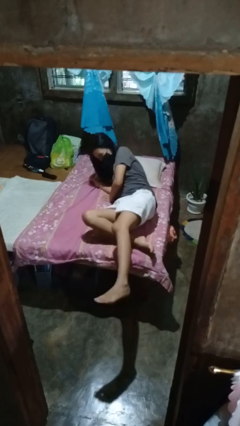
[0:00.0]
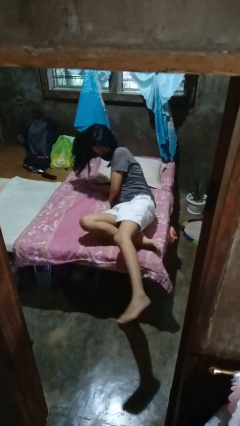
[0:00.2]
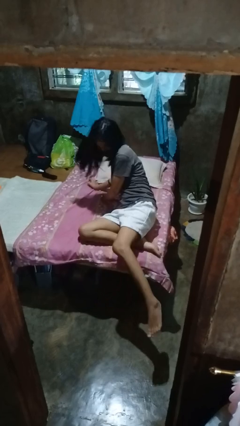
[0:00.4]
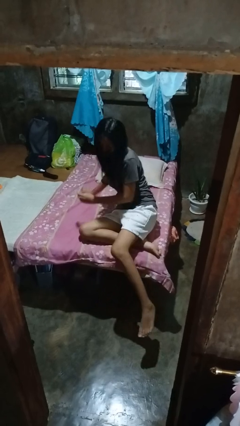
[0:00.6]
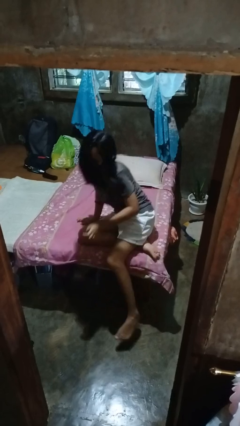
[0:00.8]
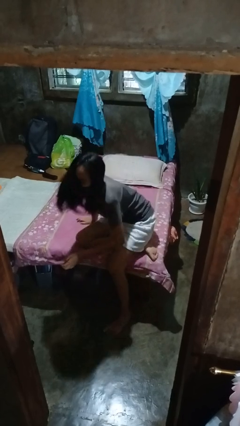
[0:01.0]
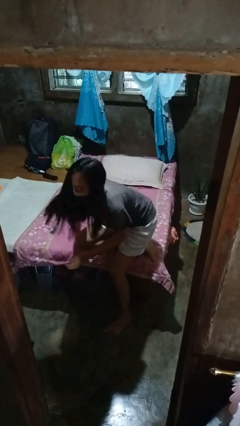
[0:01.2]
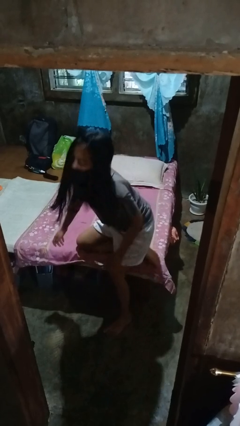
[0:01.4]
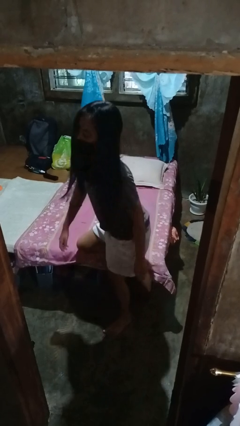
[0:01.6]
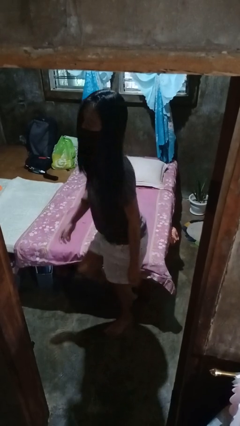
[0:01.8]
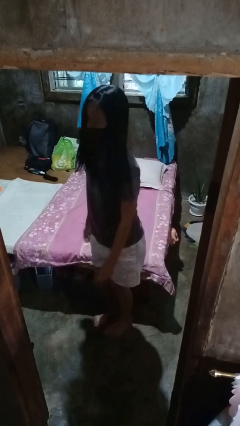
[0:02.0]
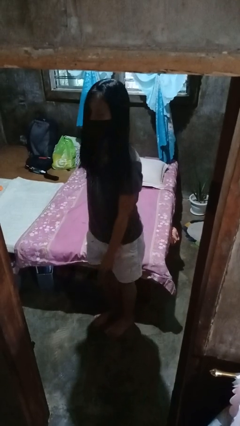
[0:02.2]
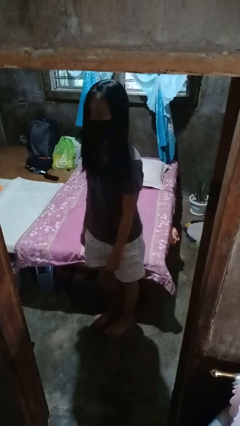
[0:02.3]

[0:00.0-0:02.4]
person stands up

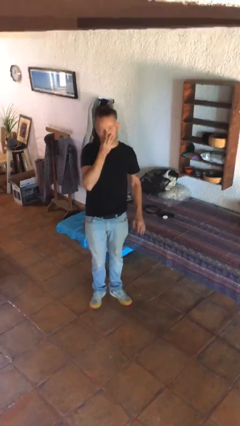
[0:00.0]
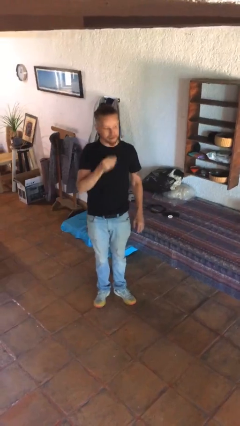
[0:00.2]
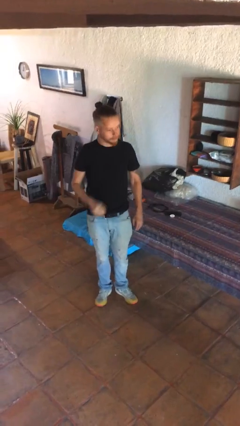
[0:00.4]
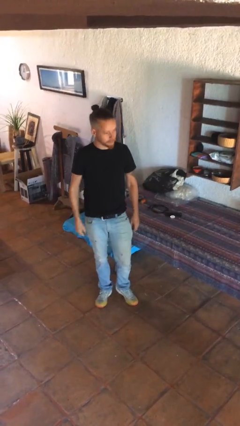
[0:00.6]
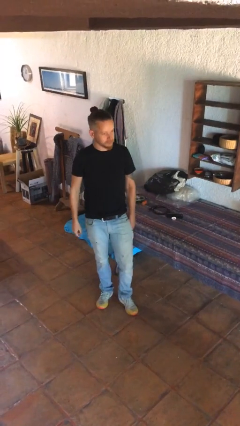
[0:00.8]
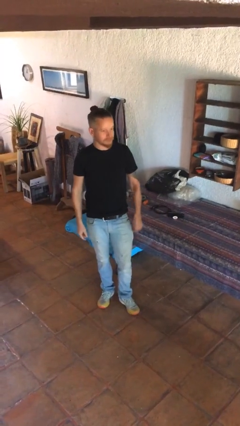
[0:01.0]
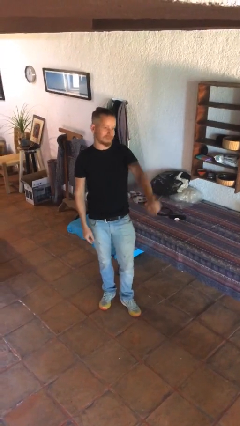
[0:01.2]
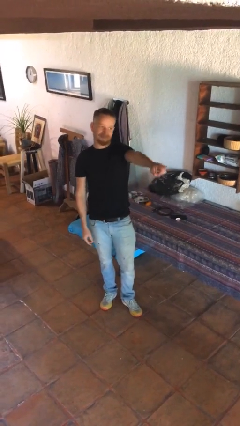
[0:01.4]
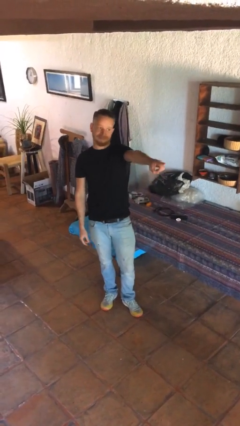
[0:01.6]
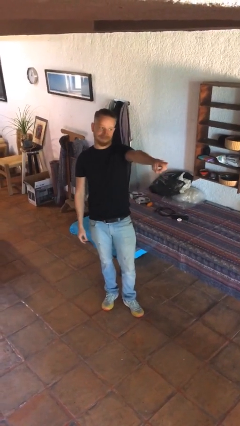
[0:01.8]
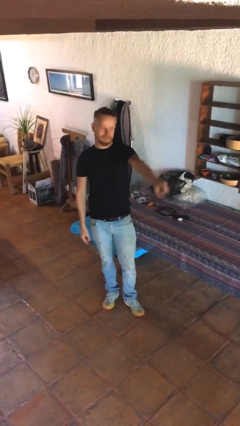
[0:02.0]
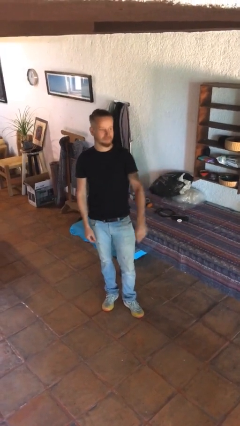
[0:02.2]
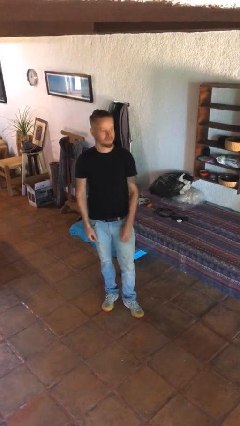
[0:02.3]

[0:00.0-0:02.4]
person points at person

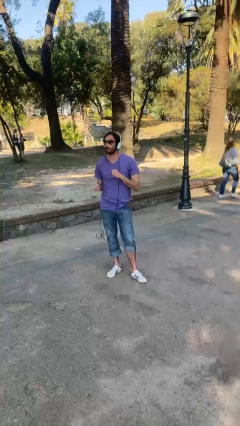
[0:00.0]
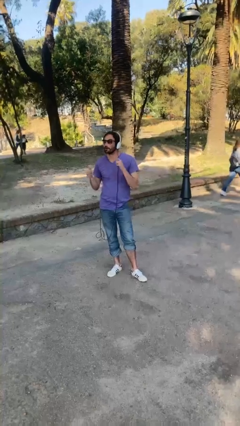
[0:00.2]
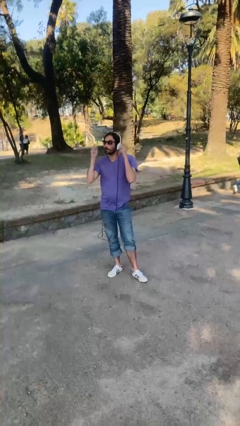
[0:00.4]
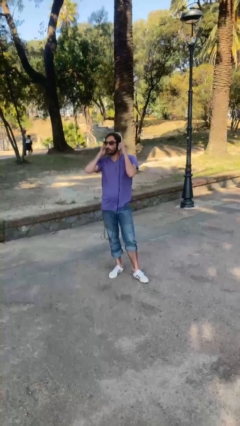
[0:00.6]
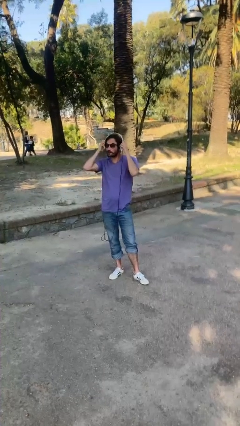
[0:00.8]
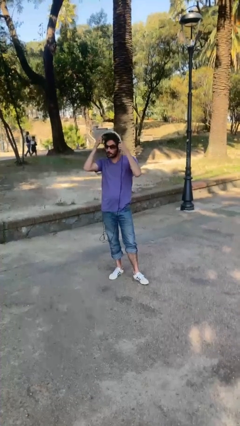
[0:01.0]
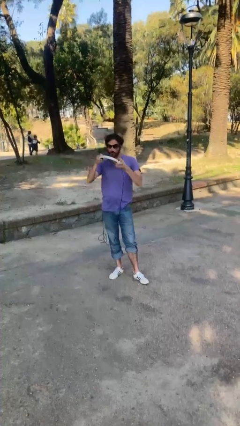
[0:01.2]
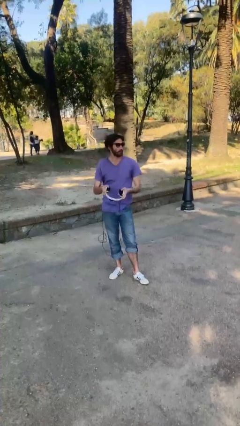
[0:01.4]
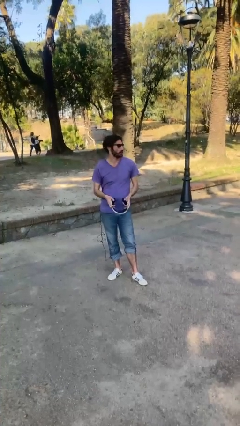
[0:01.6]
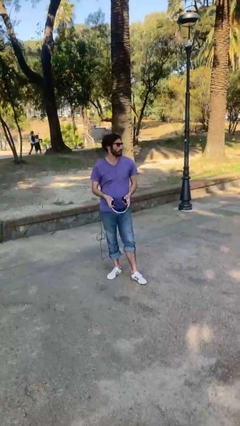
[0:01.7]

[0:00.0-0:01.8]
person takes off headphones

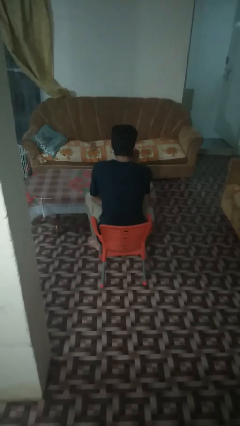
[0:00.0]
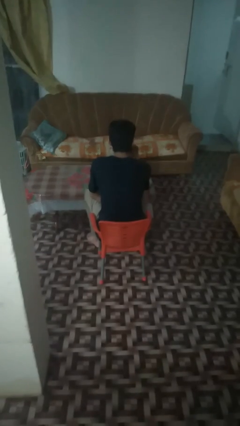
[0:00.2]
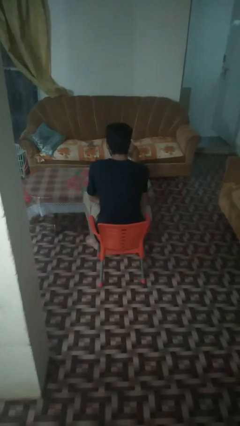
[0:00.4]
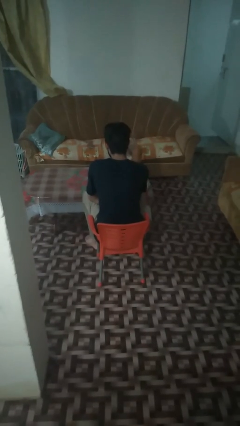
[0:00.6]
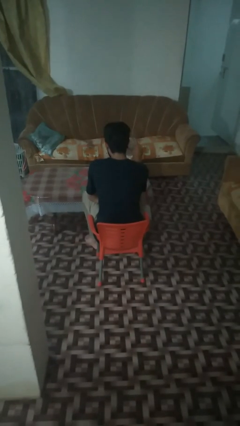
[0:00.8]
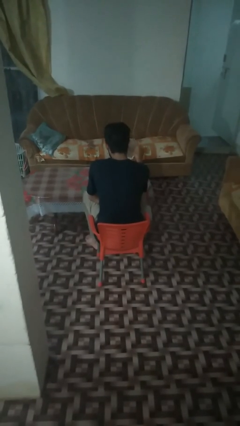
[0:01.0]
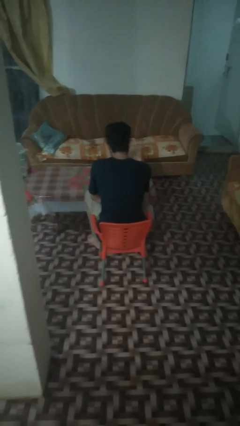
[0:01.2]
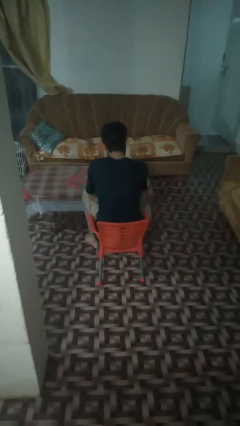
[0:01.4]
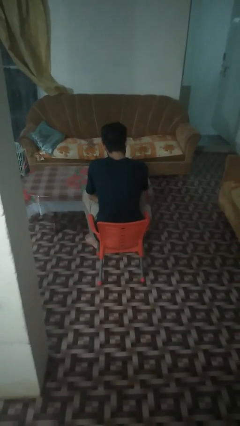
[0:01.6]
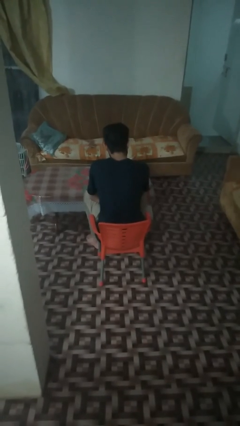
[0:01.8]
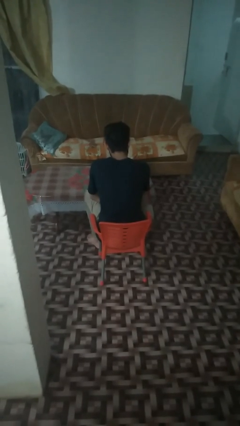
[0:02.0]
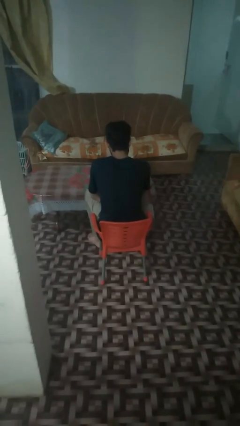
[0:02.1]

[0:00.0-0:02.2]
person puts down object on table

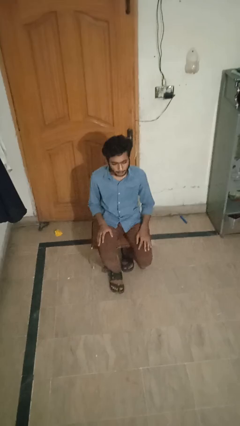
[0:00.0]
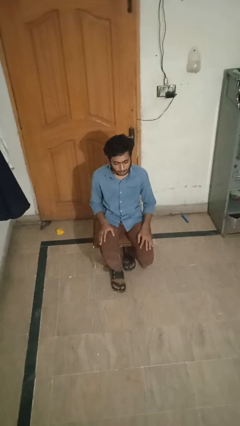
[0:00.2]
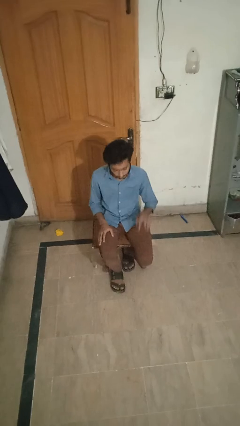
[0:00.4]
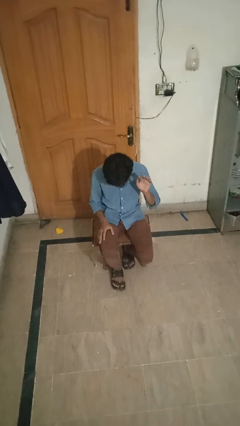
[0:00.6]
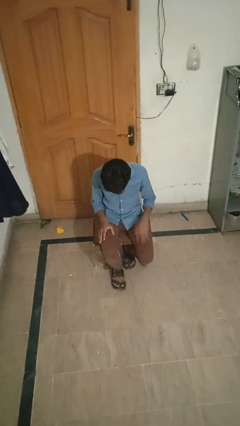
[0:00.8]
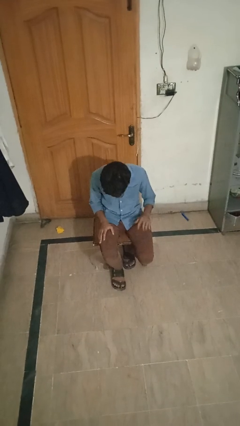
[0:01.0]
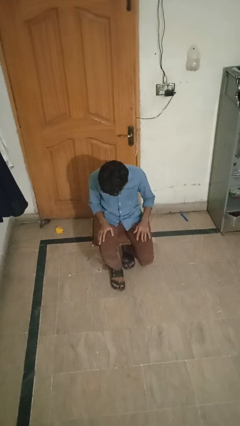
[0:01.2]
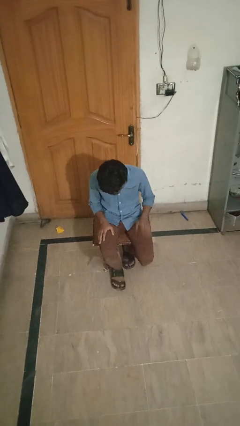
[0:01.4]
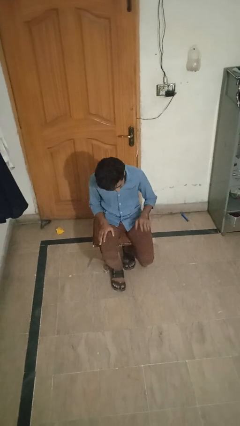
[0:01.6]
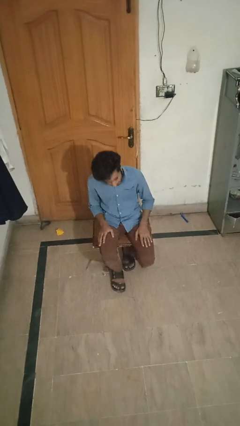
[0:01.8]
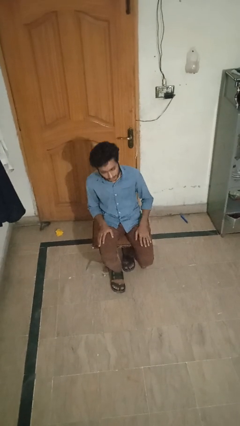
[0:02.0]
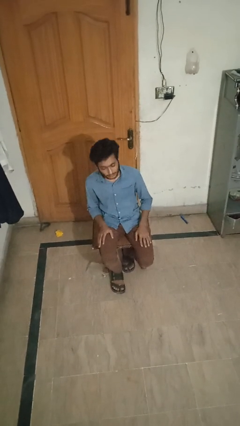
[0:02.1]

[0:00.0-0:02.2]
person slaps hands on thighs

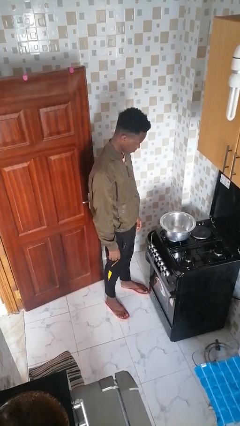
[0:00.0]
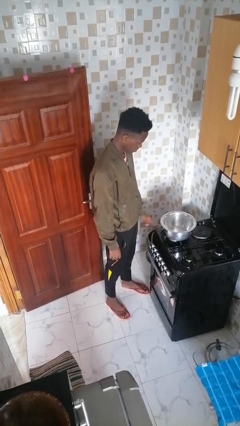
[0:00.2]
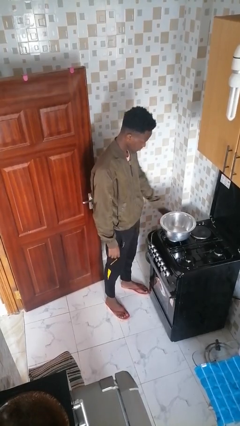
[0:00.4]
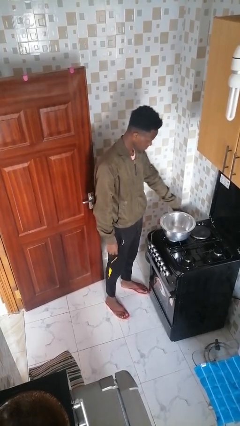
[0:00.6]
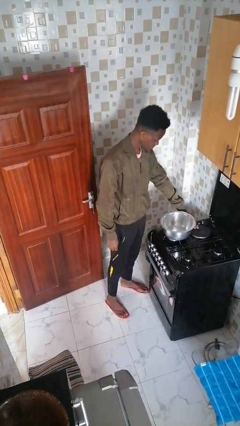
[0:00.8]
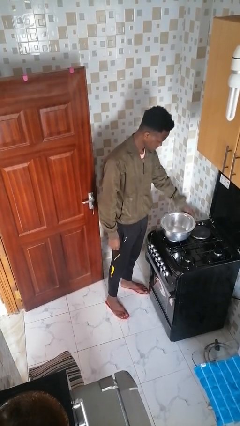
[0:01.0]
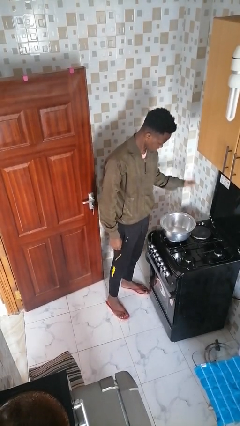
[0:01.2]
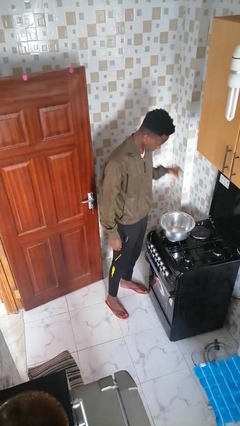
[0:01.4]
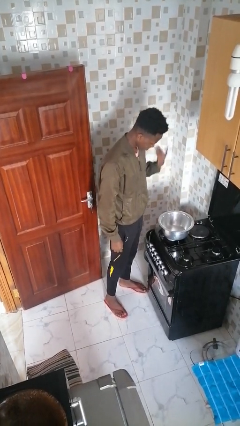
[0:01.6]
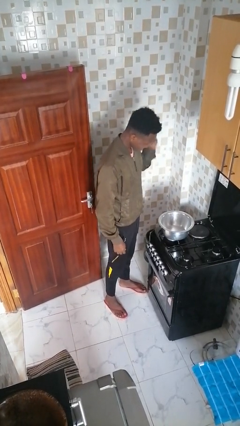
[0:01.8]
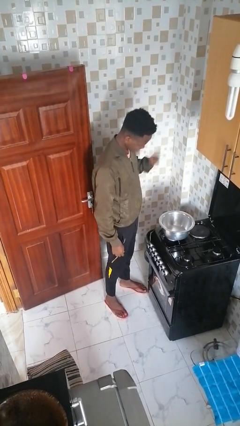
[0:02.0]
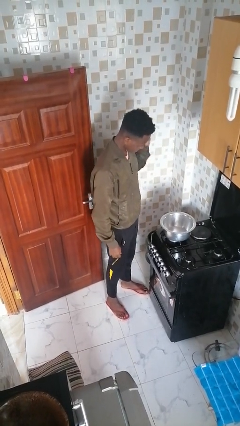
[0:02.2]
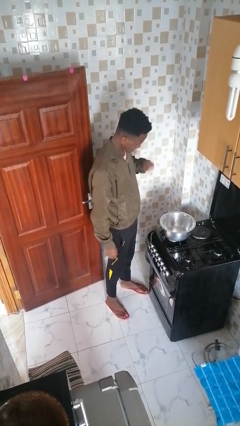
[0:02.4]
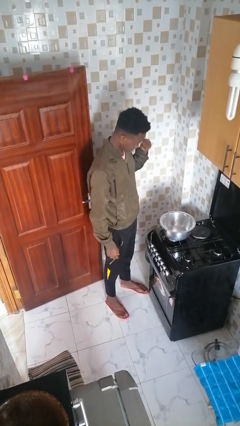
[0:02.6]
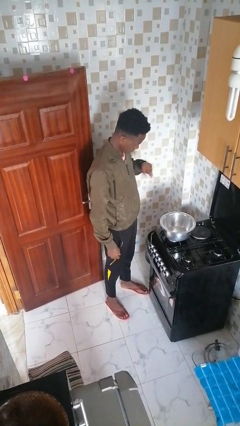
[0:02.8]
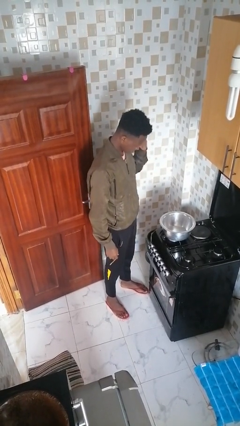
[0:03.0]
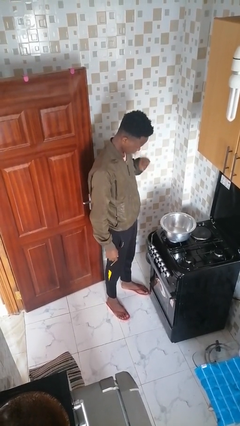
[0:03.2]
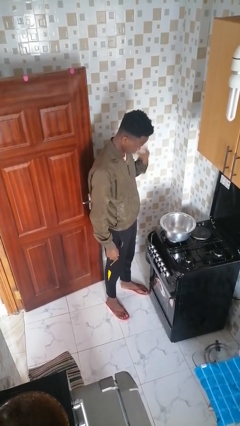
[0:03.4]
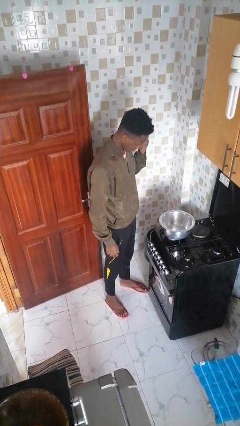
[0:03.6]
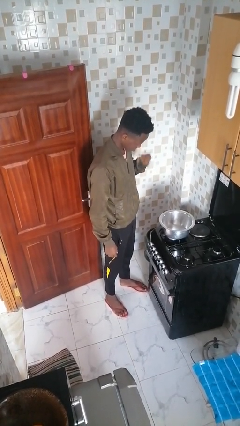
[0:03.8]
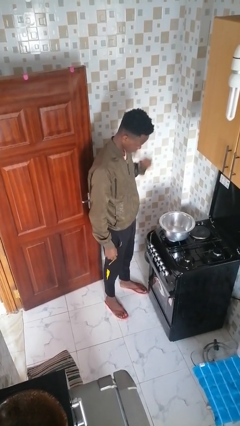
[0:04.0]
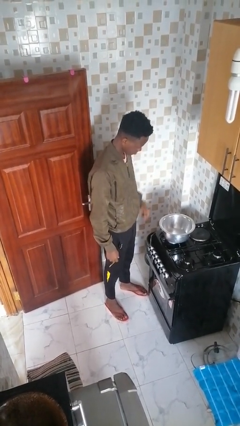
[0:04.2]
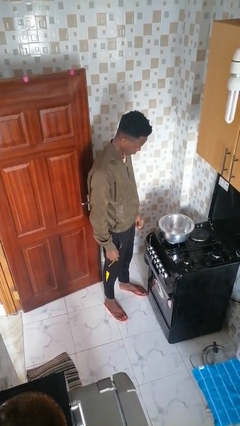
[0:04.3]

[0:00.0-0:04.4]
person burns hand

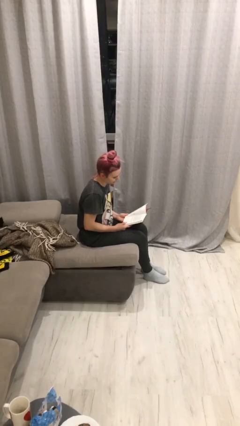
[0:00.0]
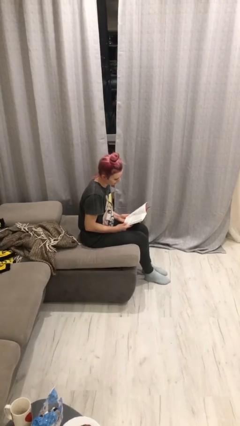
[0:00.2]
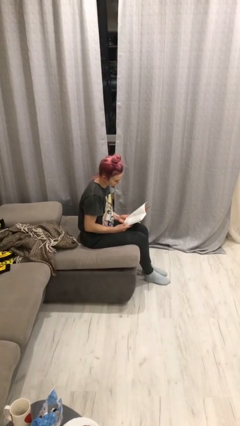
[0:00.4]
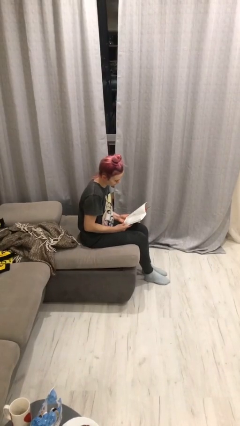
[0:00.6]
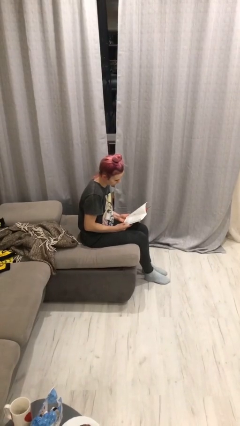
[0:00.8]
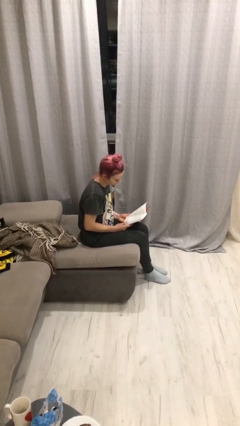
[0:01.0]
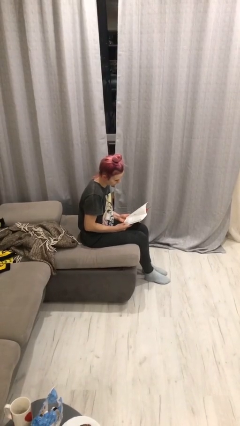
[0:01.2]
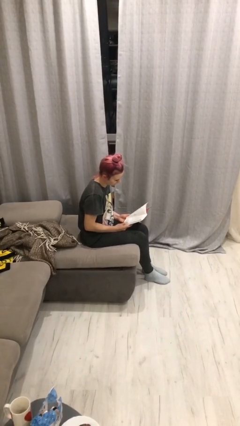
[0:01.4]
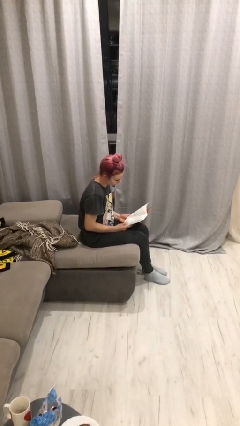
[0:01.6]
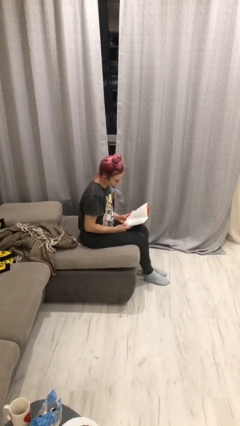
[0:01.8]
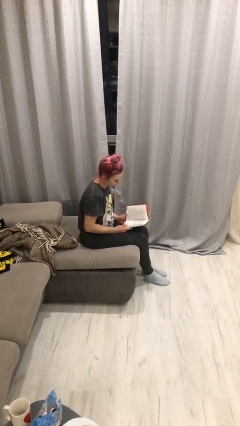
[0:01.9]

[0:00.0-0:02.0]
person reads document
